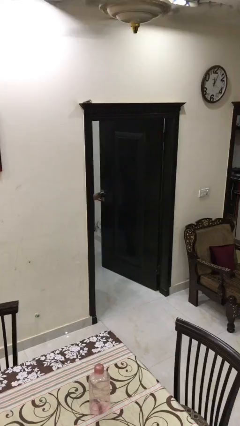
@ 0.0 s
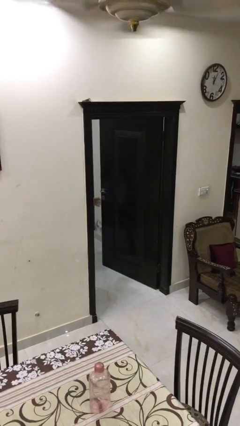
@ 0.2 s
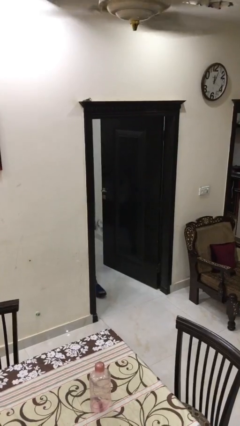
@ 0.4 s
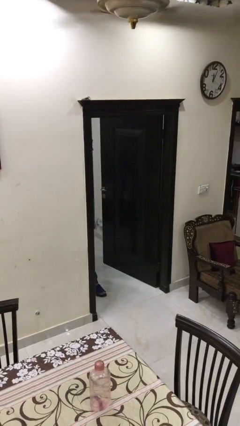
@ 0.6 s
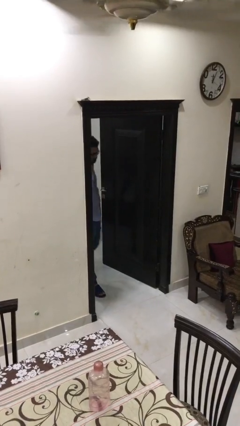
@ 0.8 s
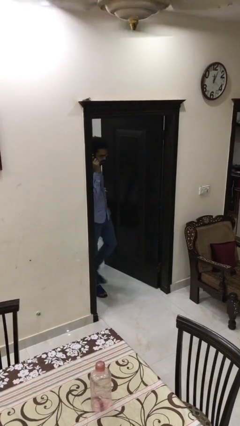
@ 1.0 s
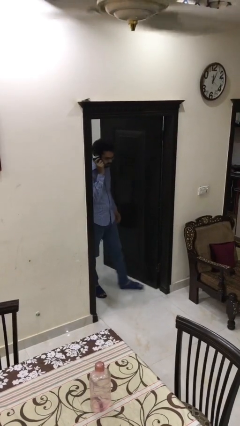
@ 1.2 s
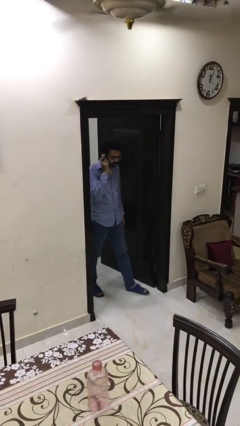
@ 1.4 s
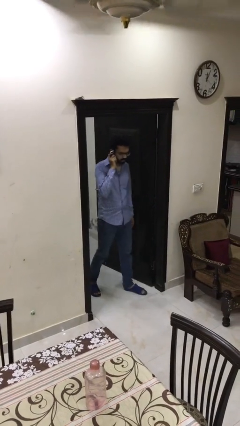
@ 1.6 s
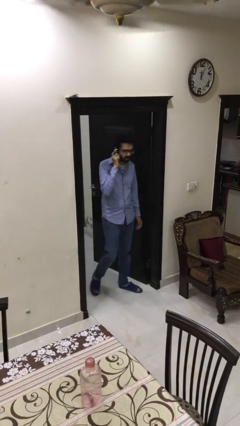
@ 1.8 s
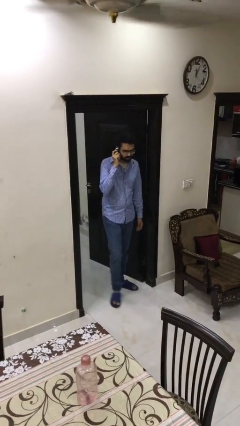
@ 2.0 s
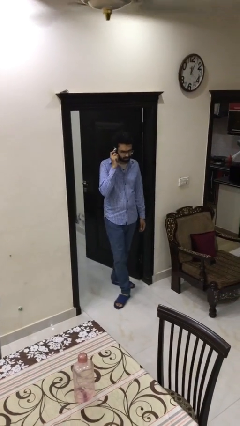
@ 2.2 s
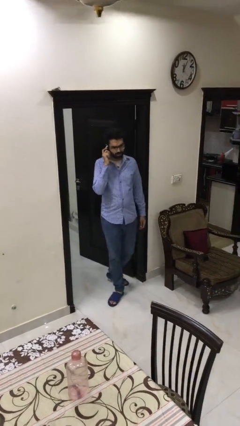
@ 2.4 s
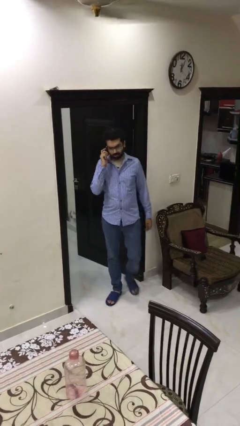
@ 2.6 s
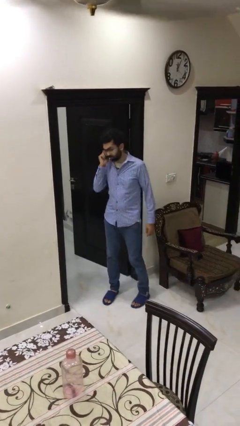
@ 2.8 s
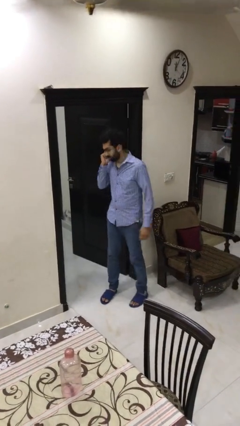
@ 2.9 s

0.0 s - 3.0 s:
person enters scene through structure

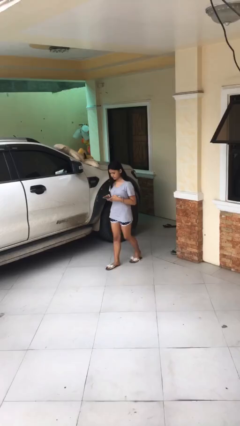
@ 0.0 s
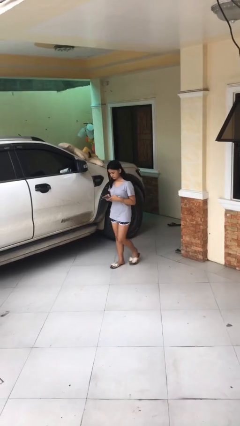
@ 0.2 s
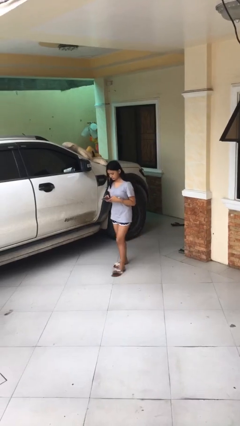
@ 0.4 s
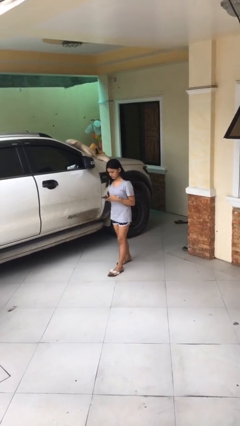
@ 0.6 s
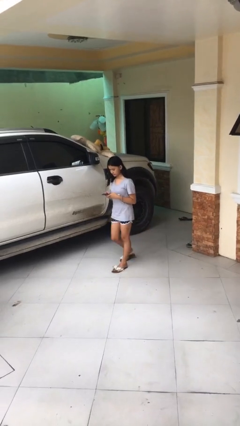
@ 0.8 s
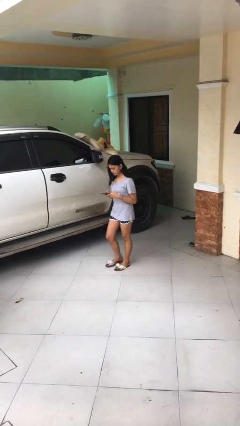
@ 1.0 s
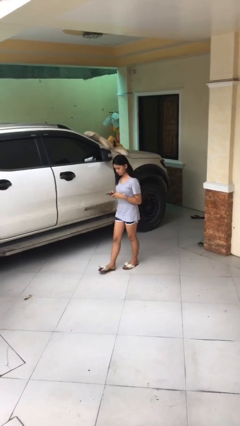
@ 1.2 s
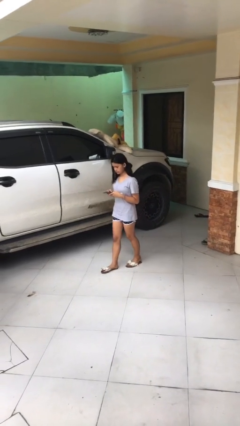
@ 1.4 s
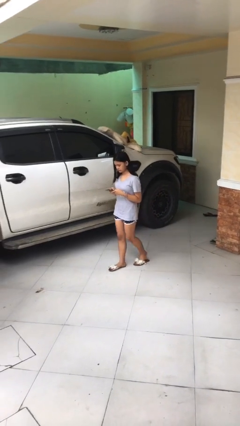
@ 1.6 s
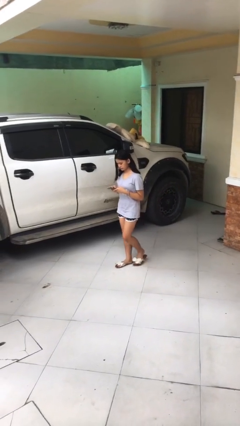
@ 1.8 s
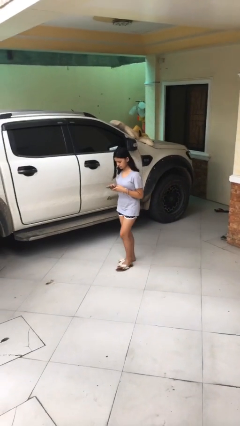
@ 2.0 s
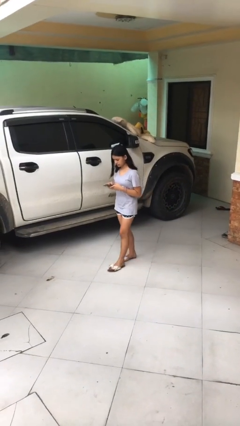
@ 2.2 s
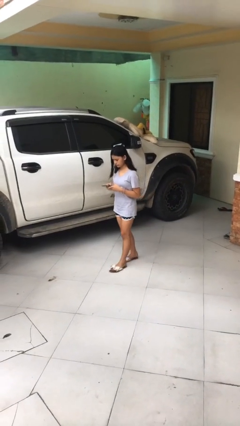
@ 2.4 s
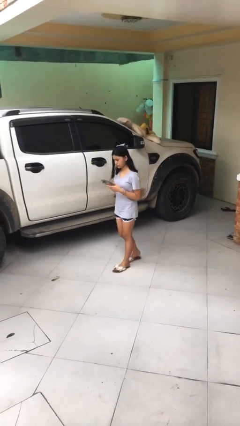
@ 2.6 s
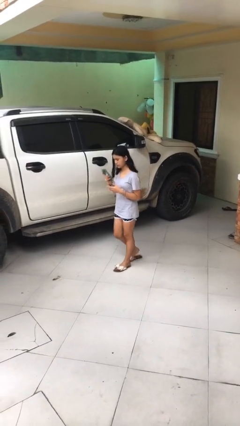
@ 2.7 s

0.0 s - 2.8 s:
person texts on phone

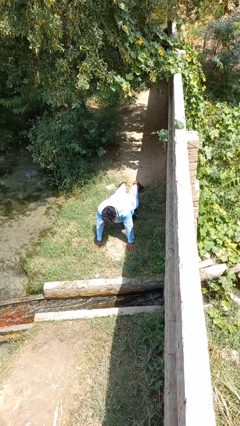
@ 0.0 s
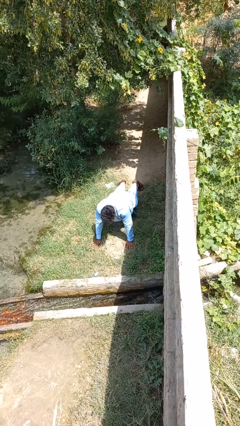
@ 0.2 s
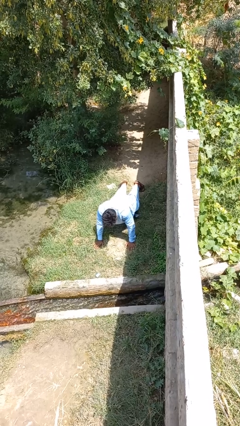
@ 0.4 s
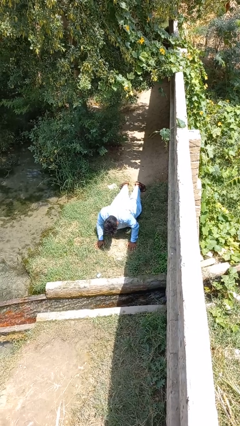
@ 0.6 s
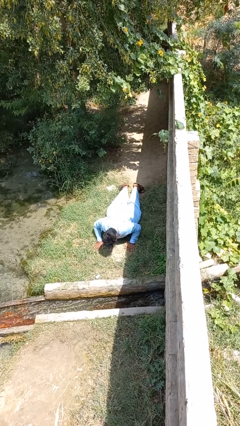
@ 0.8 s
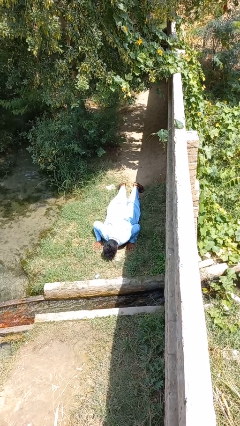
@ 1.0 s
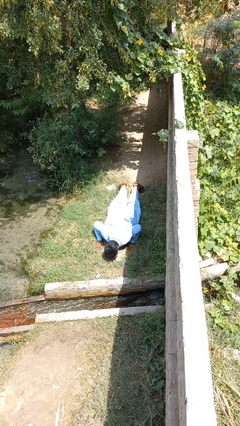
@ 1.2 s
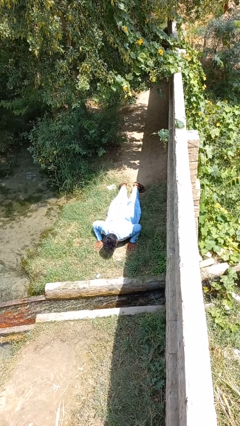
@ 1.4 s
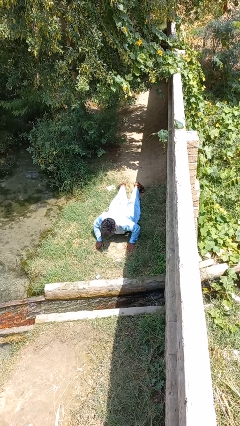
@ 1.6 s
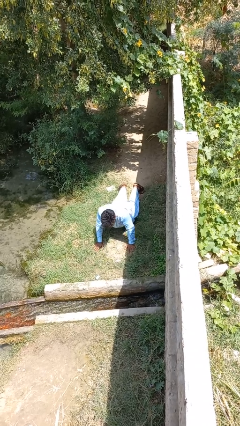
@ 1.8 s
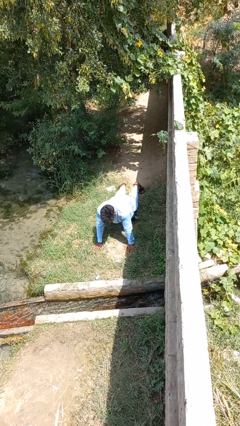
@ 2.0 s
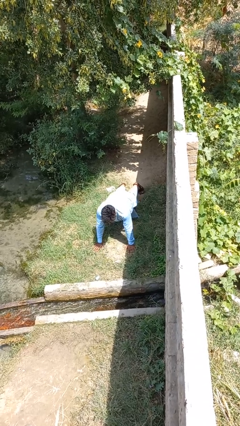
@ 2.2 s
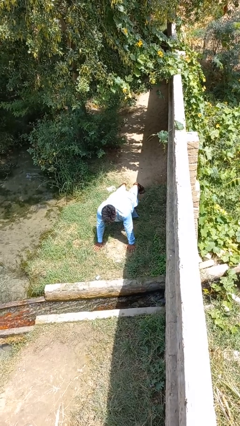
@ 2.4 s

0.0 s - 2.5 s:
person exercises with pushup

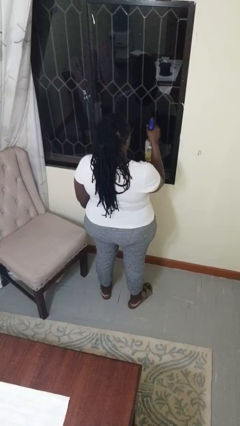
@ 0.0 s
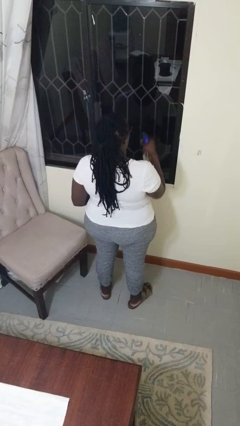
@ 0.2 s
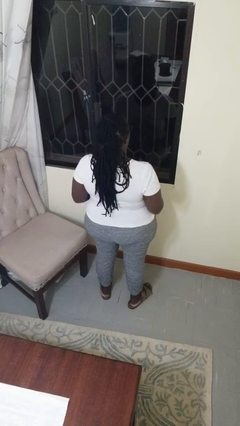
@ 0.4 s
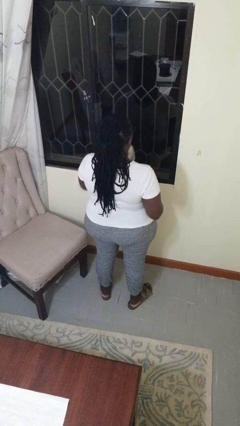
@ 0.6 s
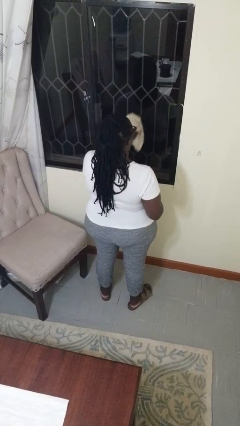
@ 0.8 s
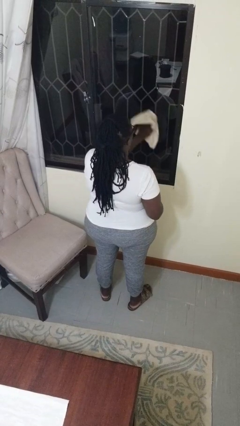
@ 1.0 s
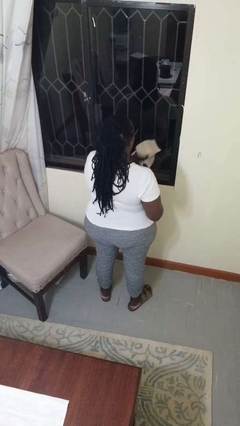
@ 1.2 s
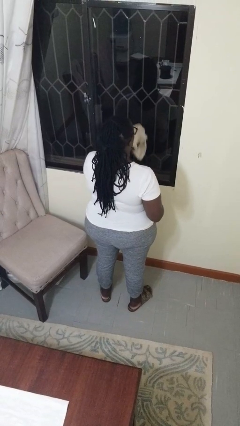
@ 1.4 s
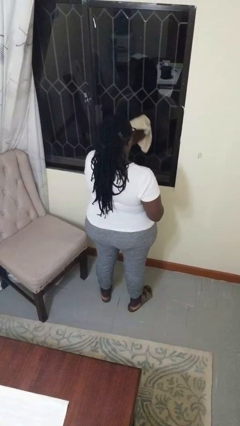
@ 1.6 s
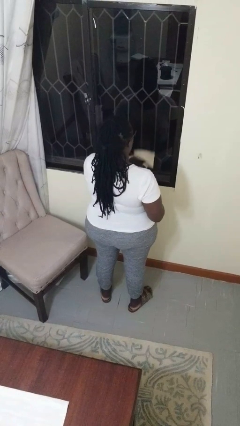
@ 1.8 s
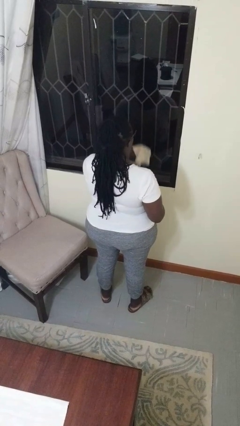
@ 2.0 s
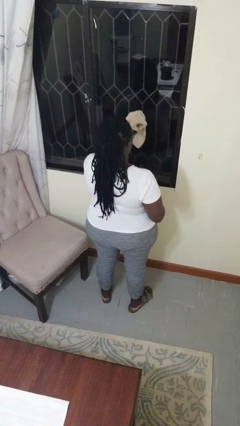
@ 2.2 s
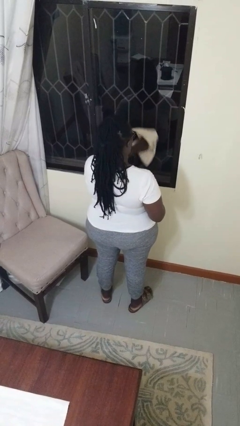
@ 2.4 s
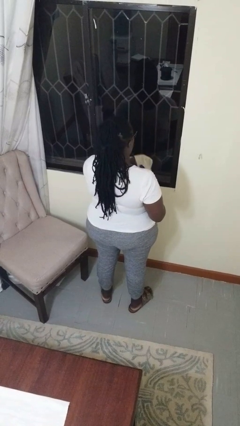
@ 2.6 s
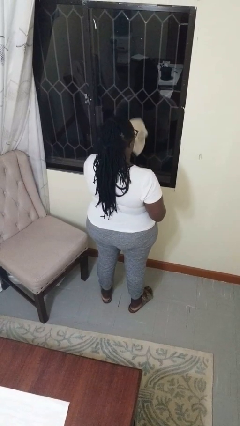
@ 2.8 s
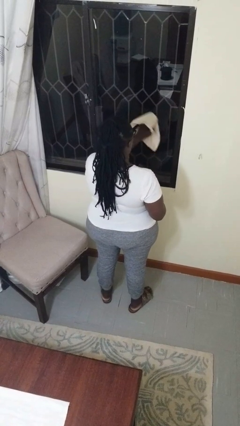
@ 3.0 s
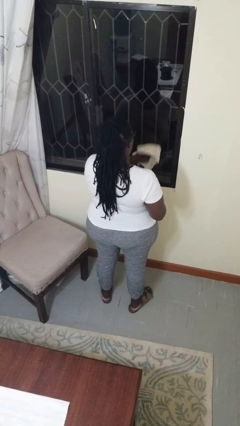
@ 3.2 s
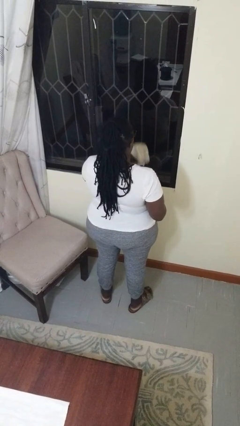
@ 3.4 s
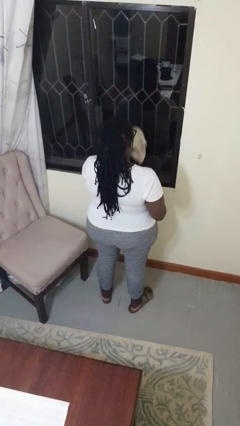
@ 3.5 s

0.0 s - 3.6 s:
person washes window

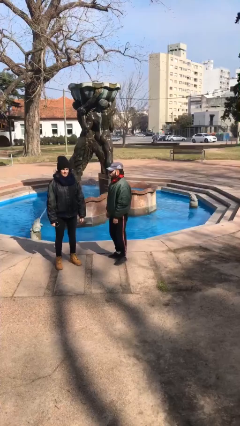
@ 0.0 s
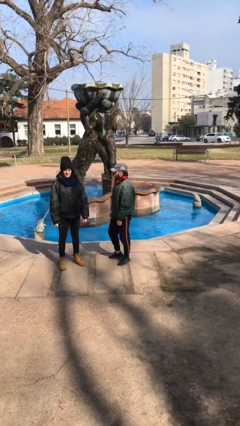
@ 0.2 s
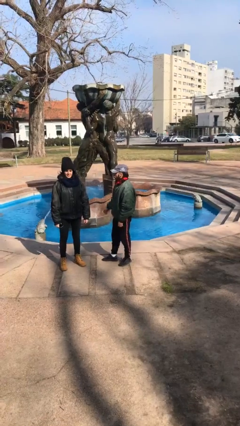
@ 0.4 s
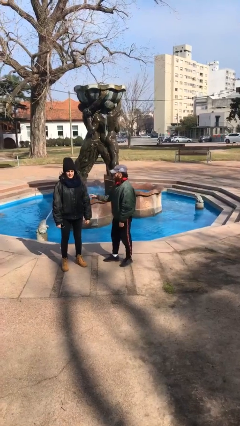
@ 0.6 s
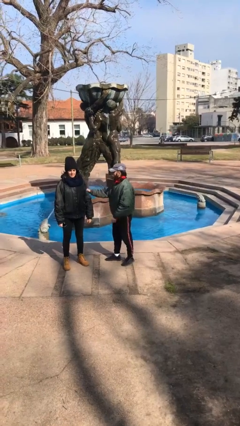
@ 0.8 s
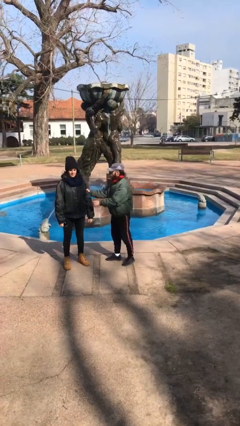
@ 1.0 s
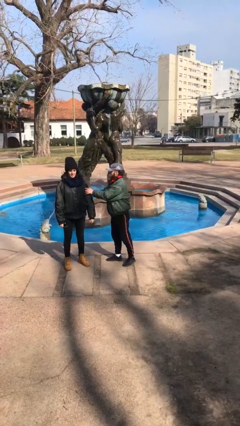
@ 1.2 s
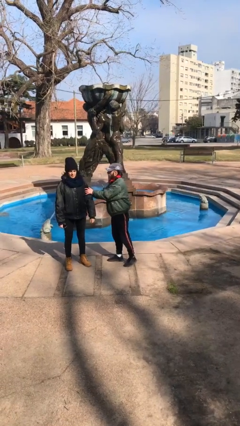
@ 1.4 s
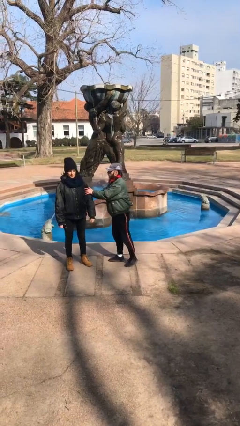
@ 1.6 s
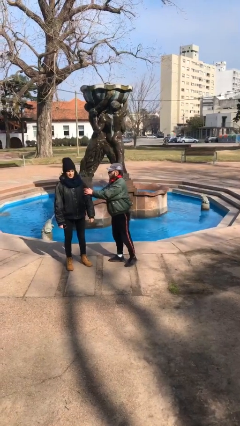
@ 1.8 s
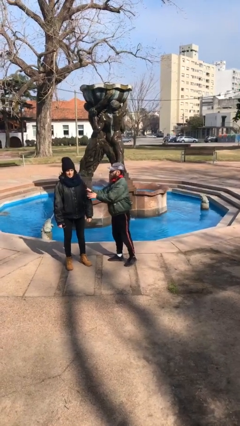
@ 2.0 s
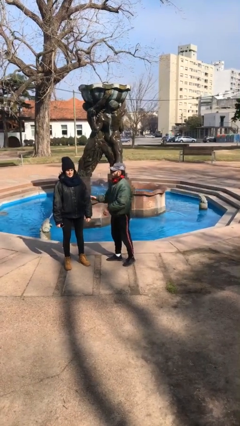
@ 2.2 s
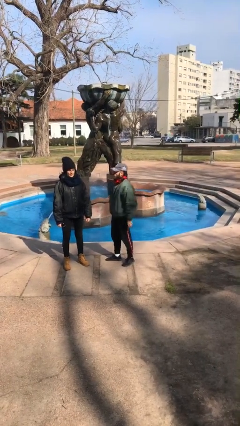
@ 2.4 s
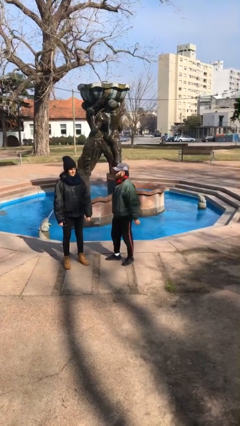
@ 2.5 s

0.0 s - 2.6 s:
person grabs person by bicep

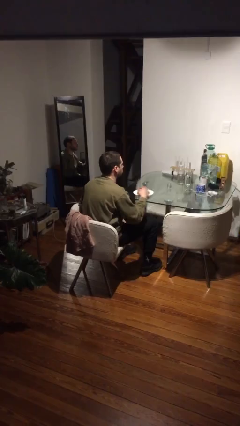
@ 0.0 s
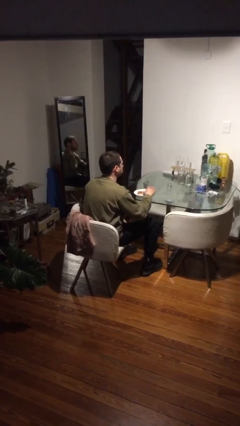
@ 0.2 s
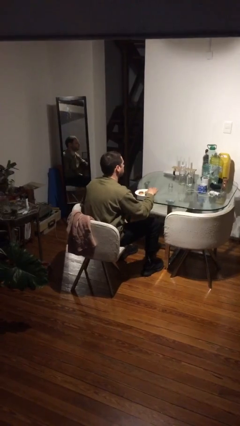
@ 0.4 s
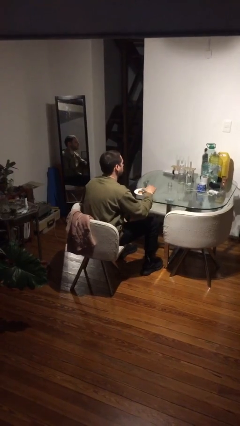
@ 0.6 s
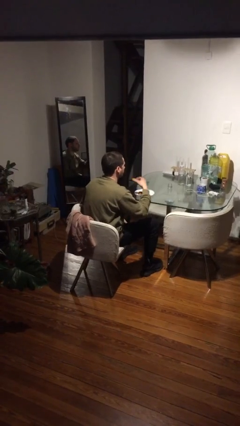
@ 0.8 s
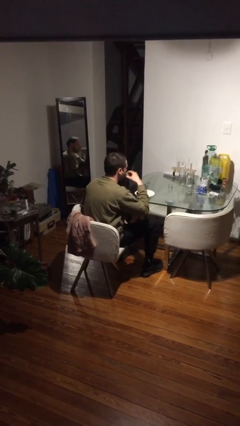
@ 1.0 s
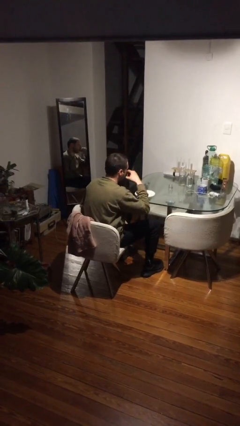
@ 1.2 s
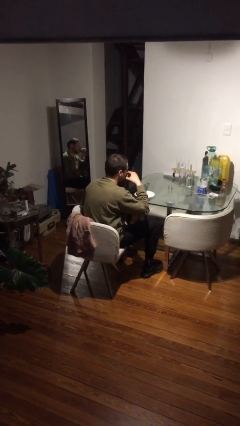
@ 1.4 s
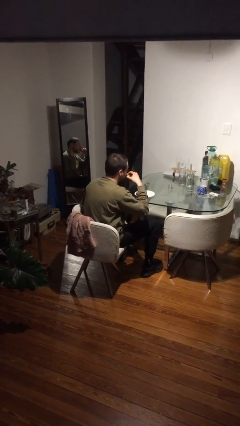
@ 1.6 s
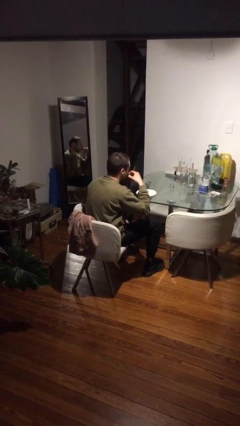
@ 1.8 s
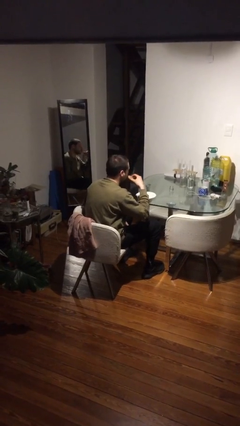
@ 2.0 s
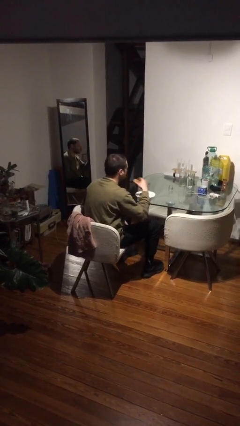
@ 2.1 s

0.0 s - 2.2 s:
person eats with hands

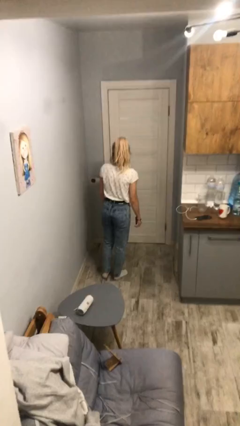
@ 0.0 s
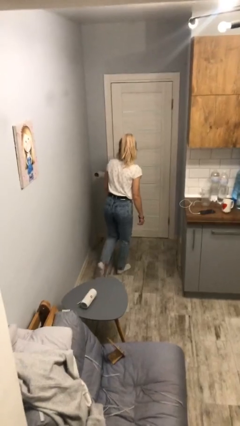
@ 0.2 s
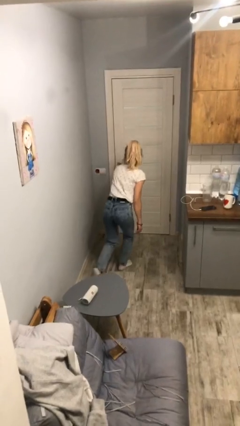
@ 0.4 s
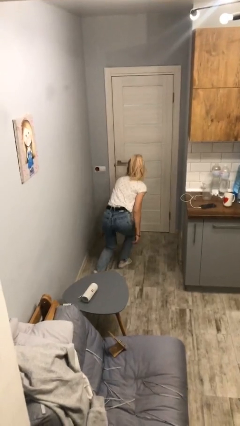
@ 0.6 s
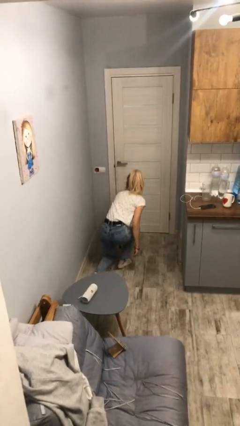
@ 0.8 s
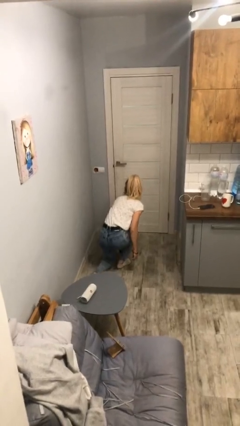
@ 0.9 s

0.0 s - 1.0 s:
person kneels
